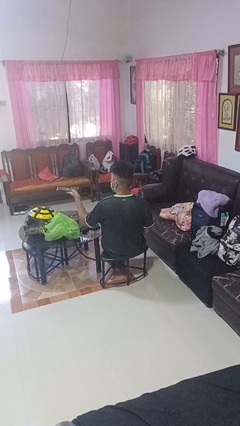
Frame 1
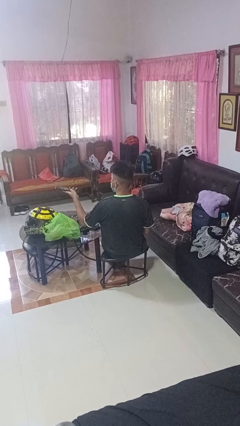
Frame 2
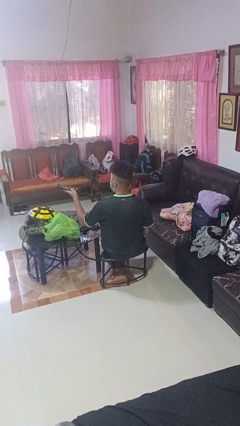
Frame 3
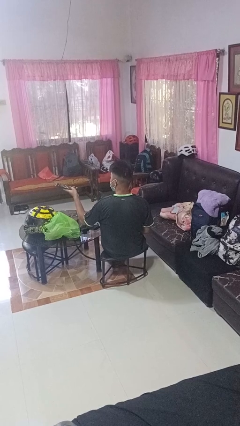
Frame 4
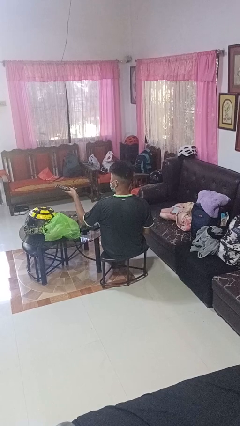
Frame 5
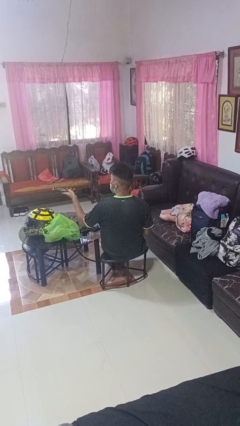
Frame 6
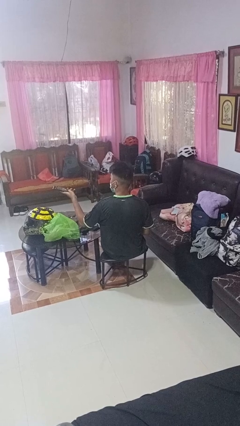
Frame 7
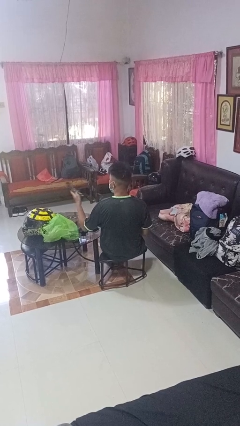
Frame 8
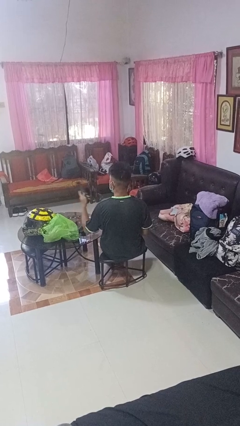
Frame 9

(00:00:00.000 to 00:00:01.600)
person uses television remote

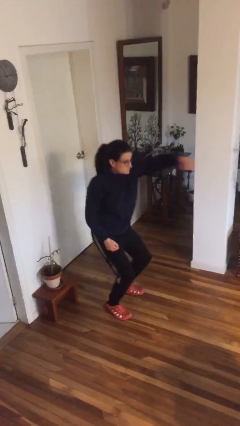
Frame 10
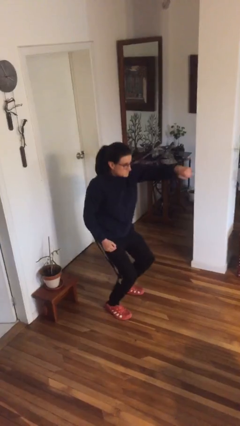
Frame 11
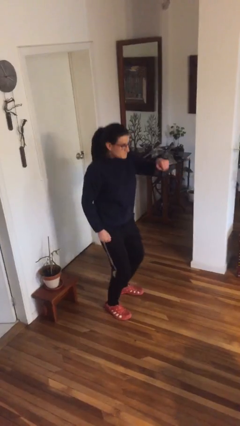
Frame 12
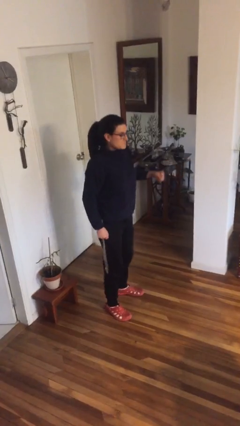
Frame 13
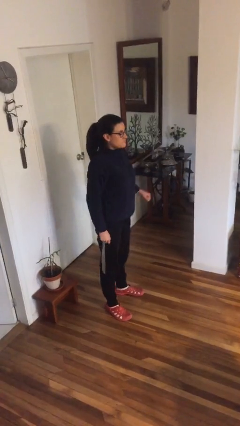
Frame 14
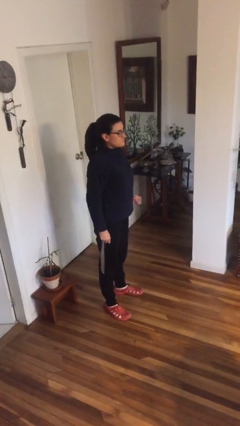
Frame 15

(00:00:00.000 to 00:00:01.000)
person punches

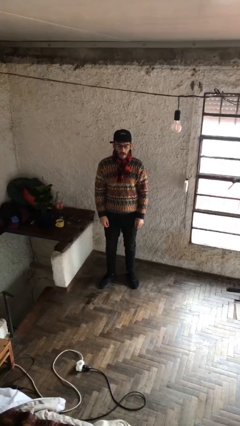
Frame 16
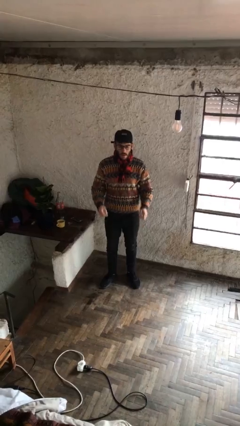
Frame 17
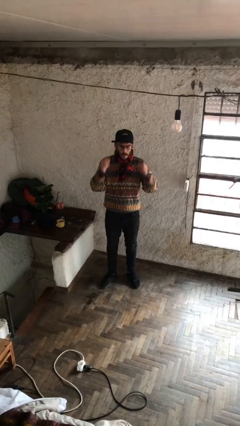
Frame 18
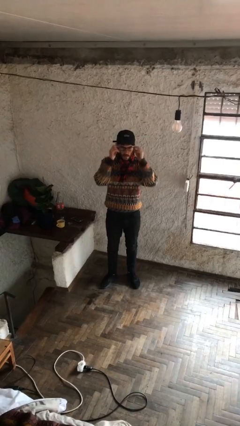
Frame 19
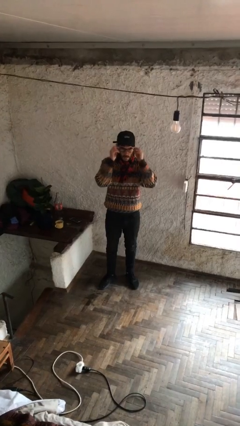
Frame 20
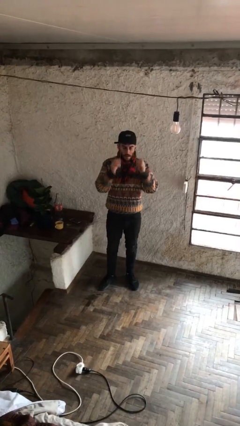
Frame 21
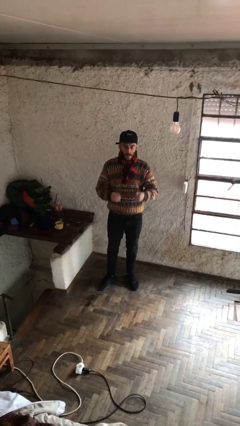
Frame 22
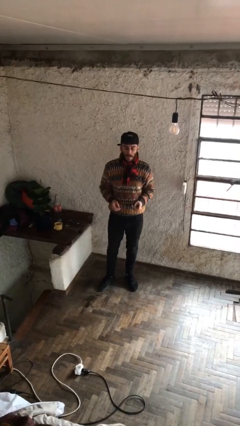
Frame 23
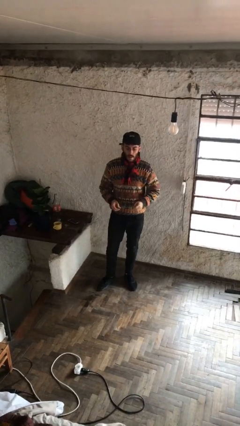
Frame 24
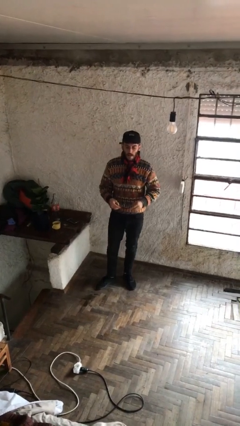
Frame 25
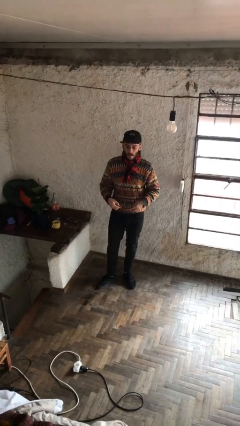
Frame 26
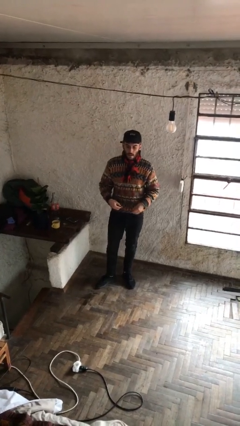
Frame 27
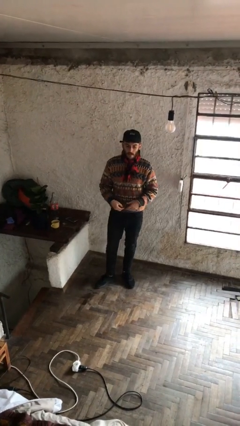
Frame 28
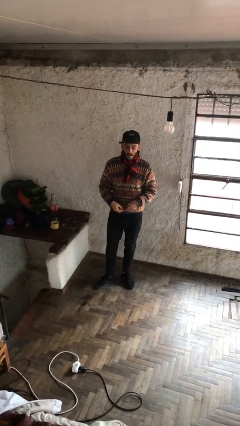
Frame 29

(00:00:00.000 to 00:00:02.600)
person takes off glasses

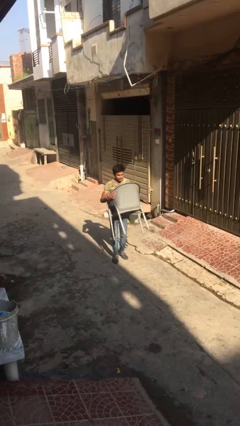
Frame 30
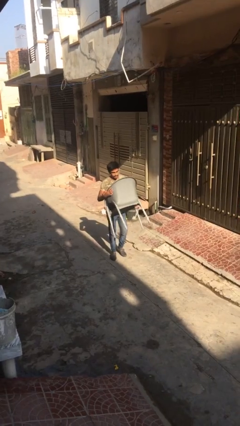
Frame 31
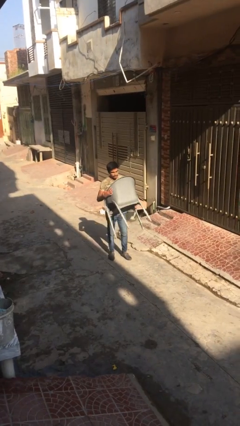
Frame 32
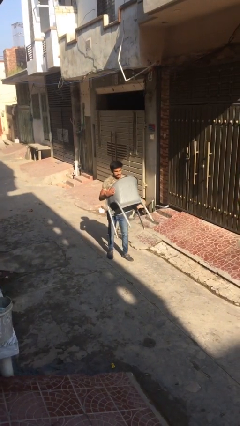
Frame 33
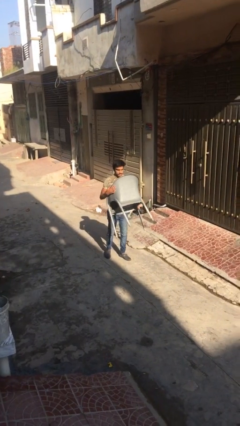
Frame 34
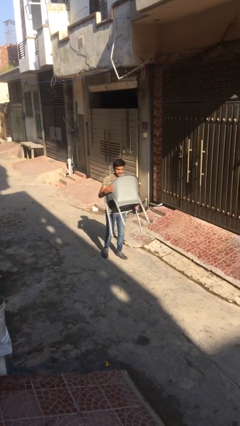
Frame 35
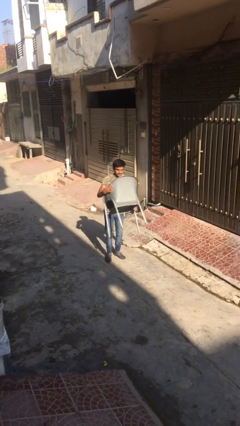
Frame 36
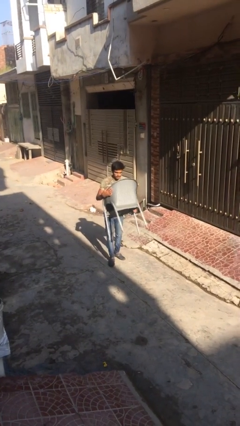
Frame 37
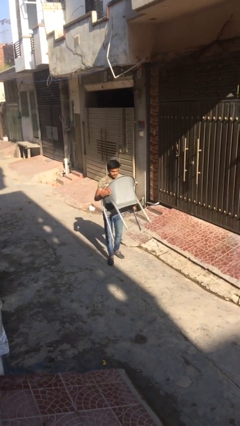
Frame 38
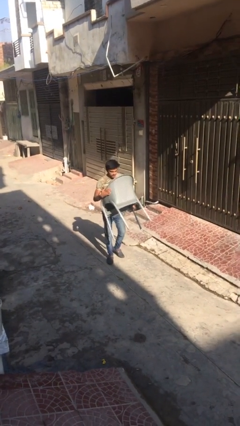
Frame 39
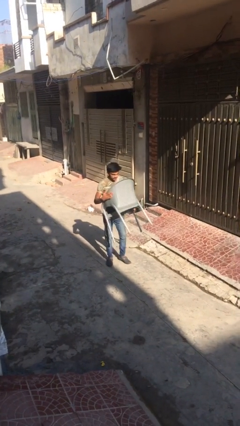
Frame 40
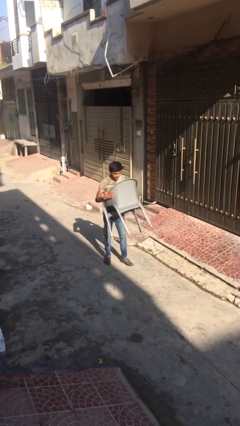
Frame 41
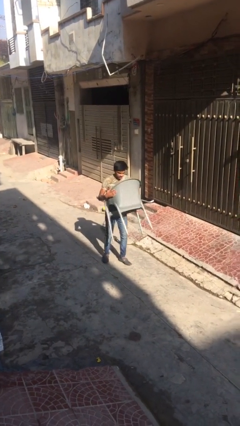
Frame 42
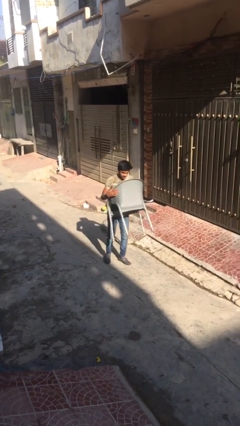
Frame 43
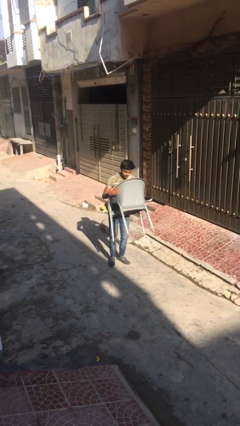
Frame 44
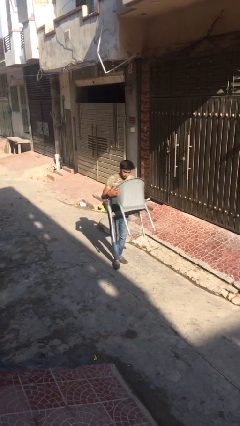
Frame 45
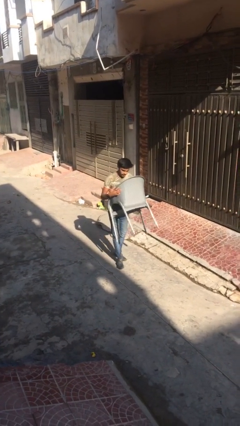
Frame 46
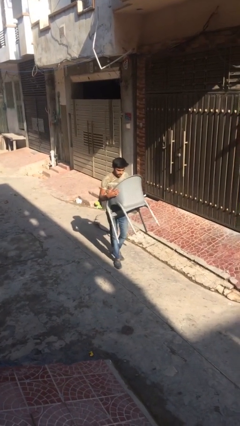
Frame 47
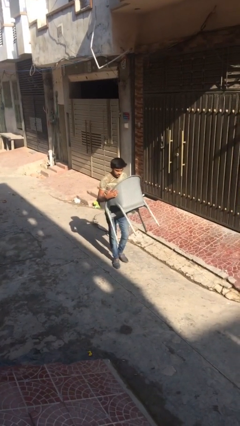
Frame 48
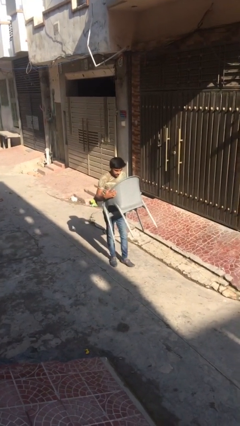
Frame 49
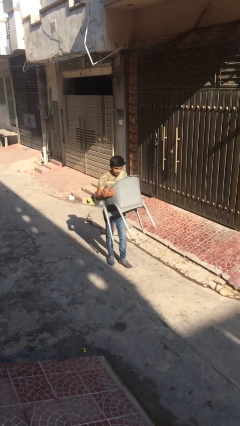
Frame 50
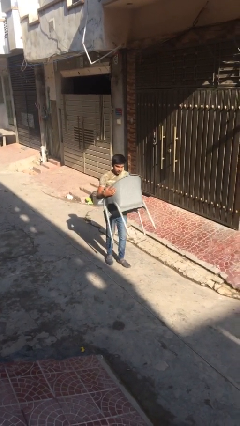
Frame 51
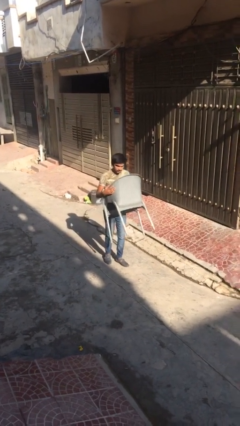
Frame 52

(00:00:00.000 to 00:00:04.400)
person carries heavy object

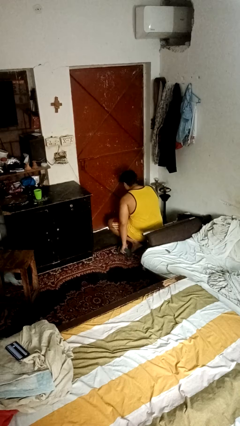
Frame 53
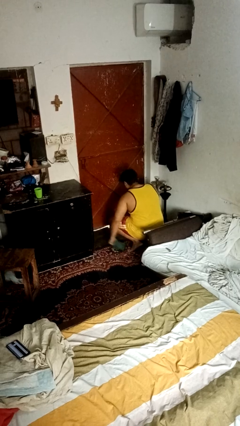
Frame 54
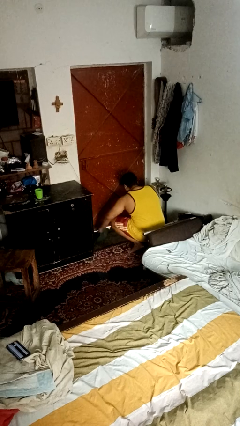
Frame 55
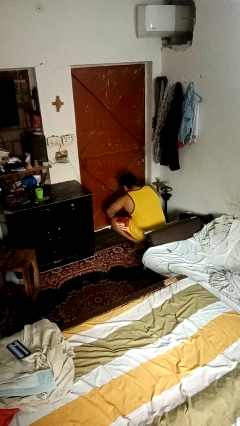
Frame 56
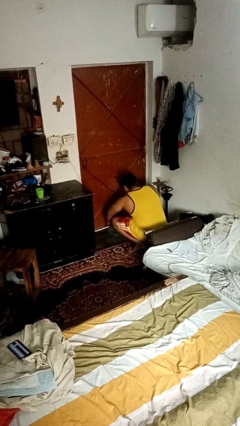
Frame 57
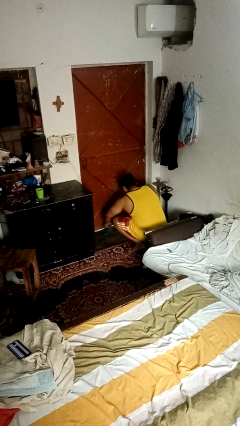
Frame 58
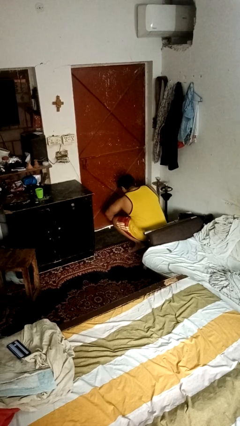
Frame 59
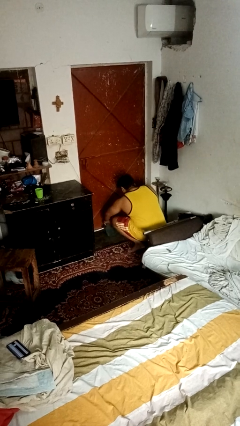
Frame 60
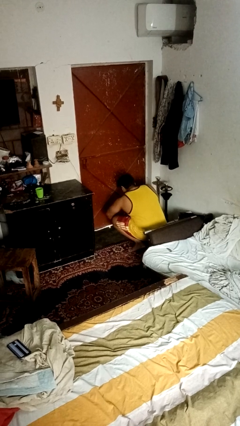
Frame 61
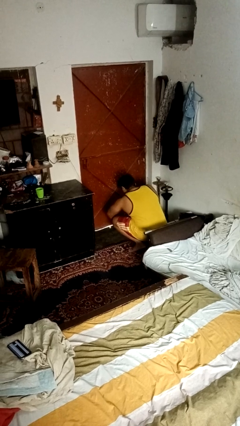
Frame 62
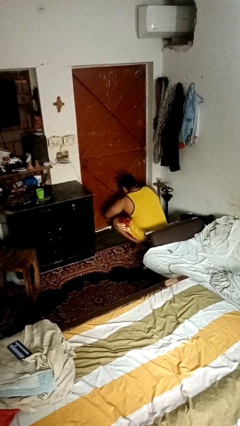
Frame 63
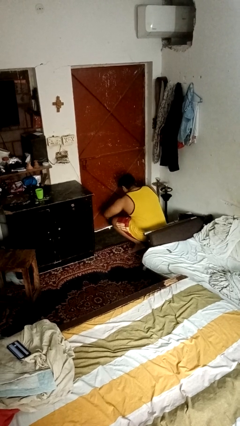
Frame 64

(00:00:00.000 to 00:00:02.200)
person mops

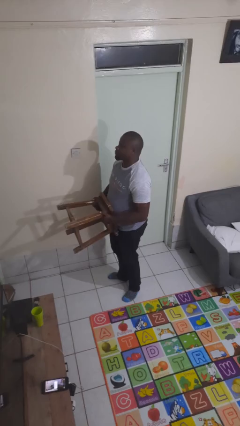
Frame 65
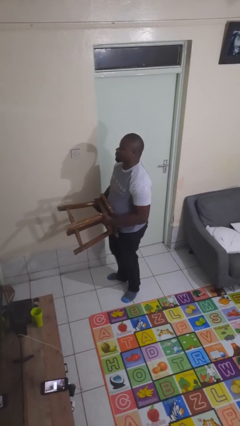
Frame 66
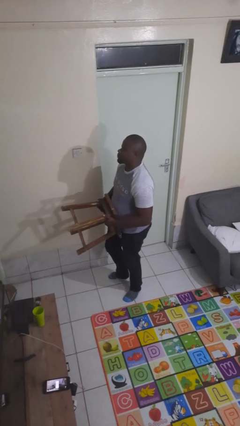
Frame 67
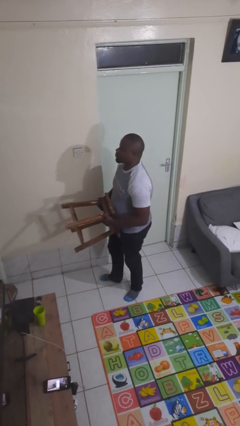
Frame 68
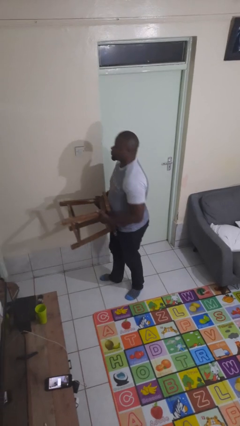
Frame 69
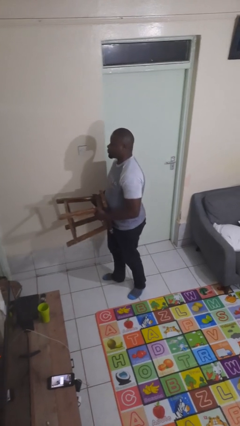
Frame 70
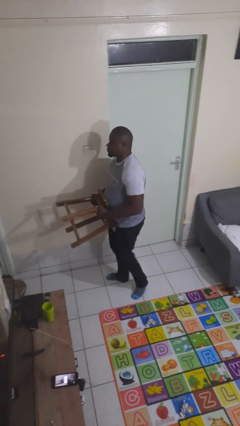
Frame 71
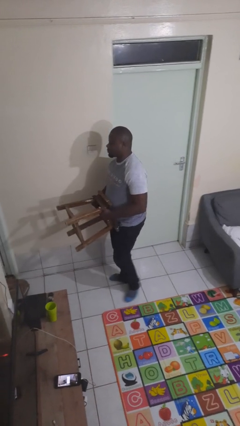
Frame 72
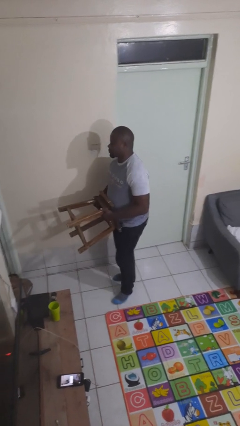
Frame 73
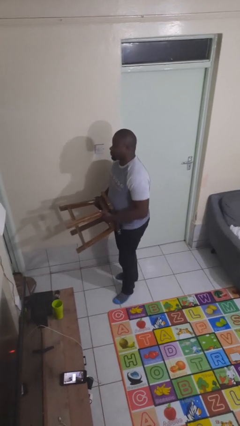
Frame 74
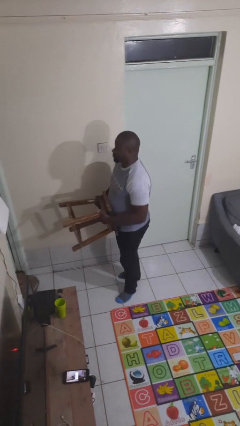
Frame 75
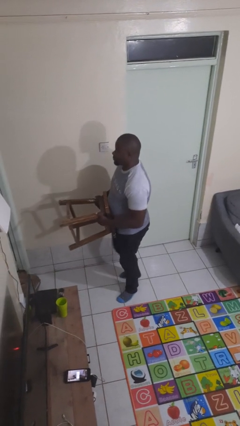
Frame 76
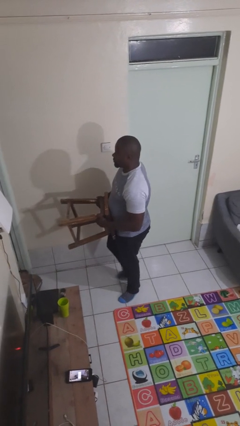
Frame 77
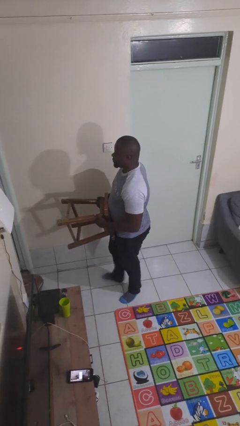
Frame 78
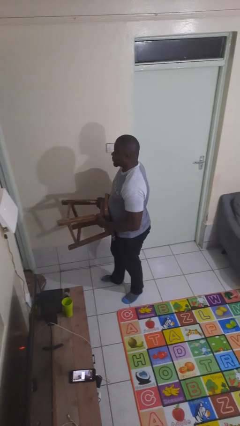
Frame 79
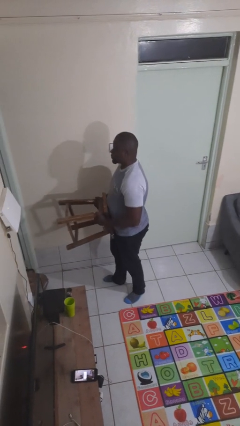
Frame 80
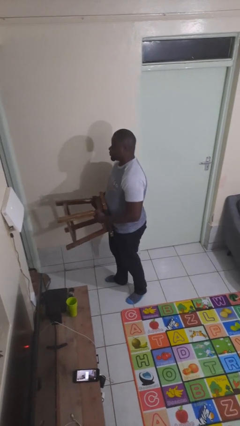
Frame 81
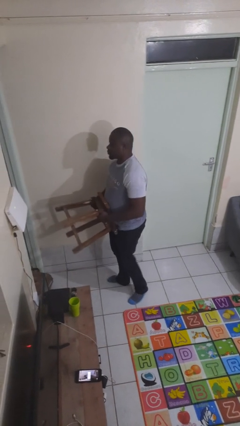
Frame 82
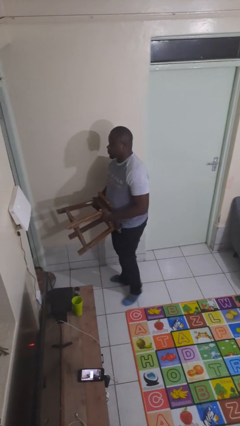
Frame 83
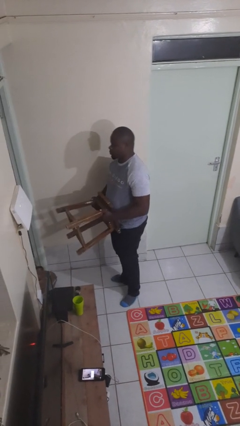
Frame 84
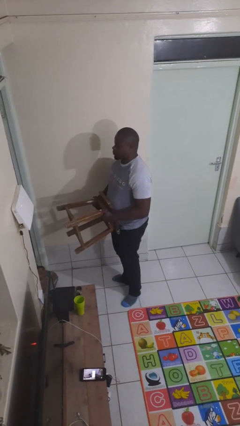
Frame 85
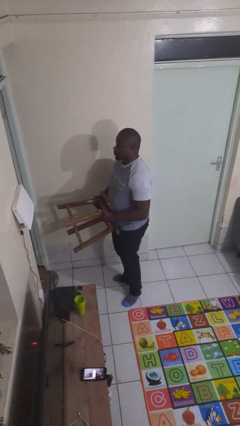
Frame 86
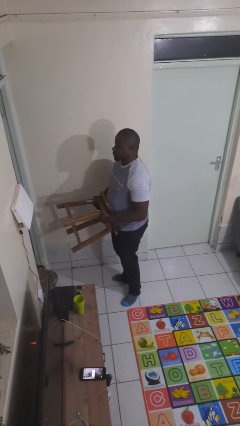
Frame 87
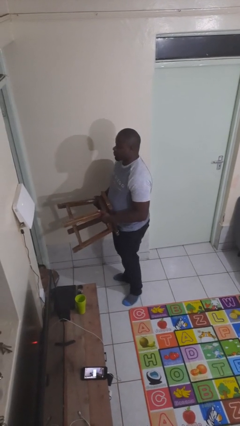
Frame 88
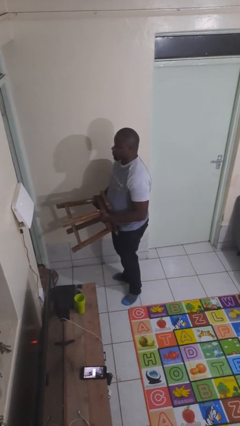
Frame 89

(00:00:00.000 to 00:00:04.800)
person carries furniture

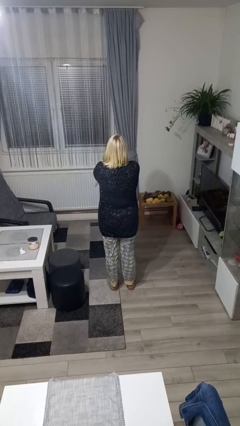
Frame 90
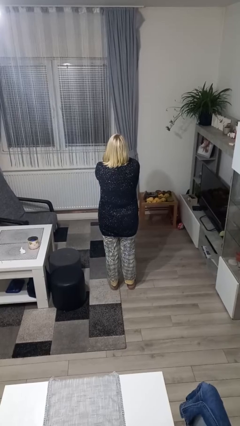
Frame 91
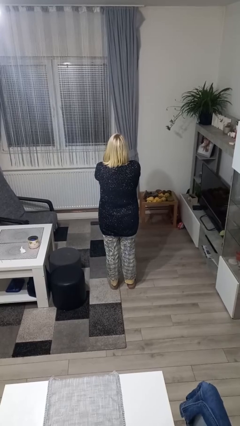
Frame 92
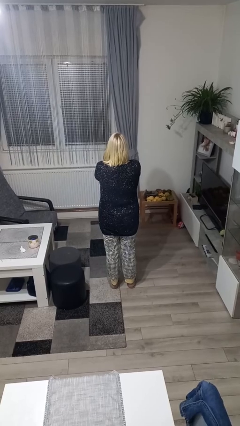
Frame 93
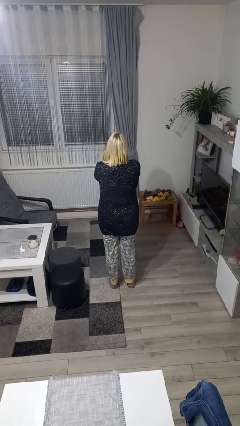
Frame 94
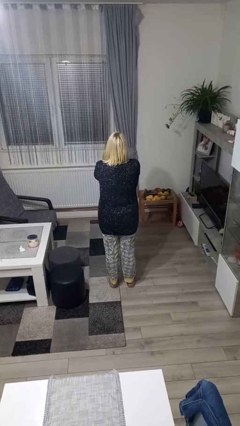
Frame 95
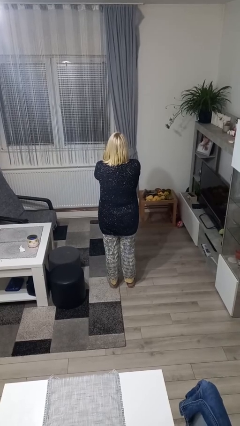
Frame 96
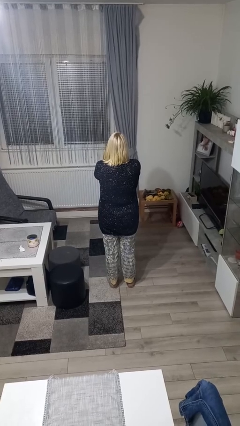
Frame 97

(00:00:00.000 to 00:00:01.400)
person gestures arms x
